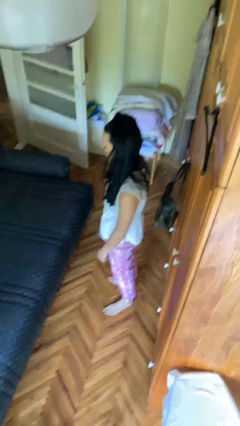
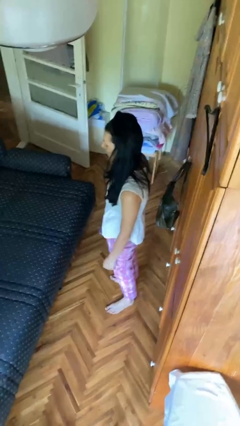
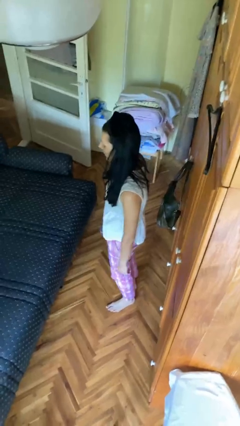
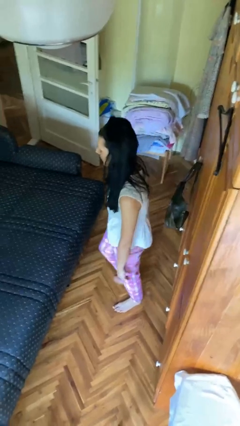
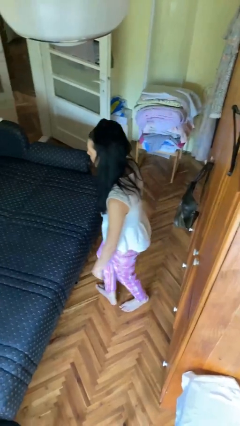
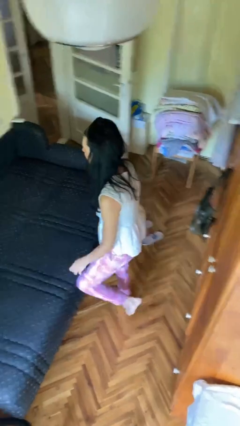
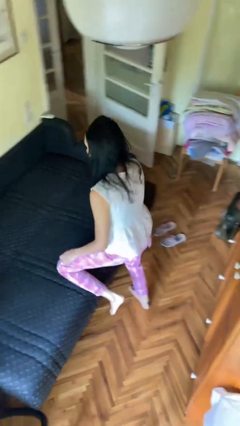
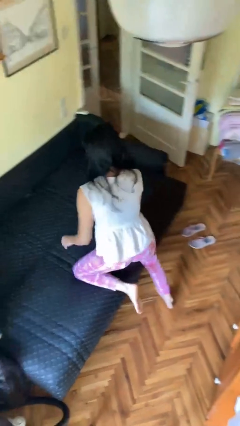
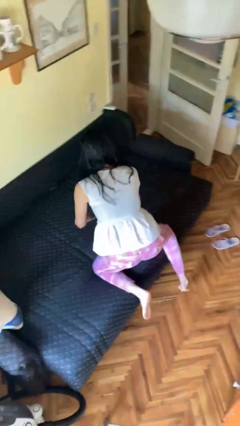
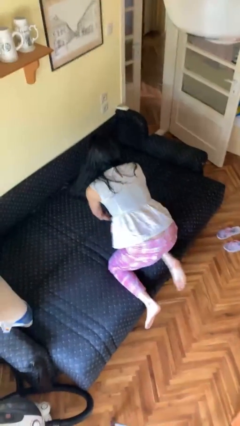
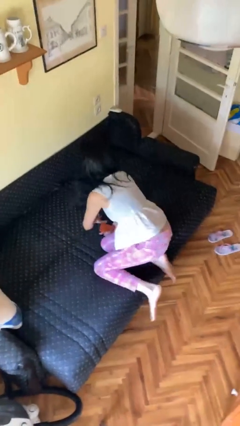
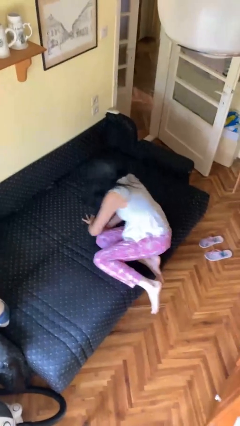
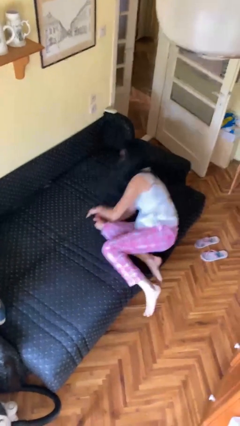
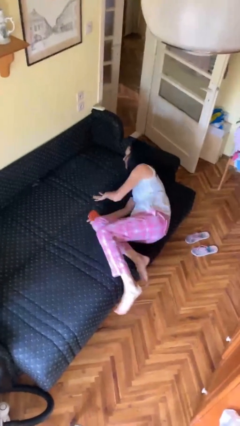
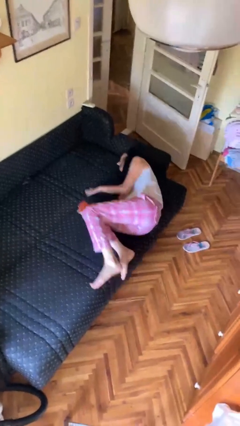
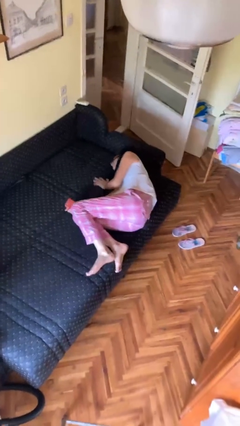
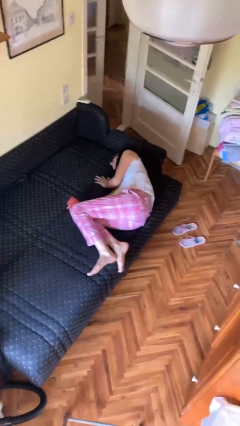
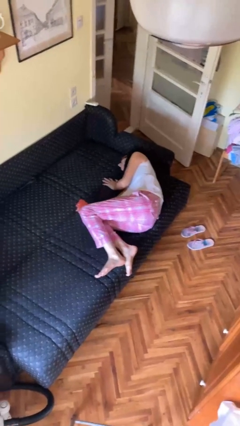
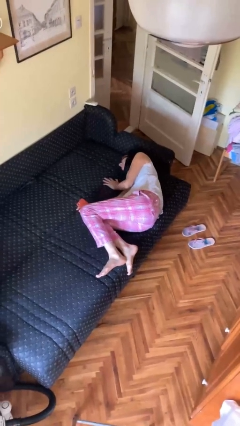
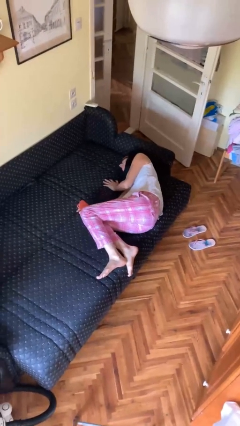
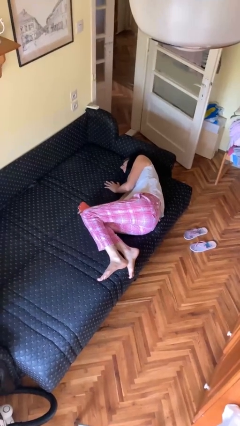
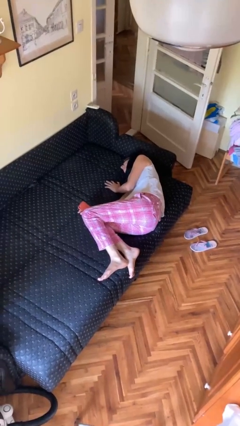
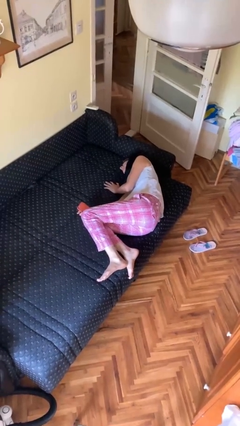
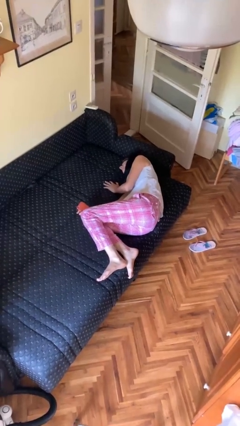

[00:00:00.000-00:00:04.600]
person lies down on bed

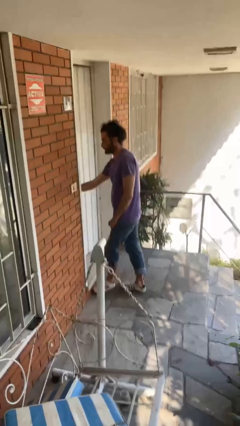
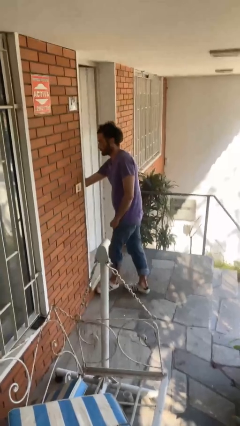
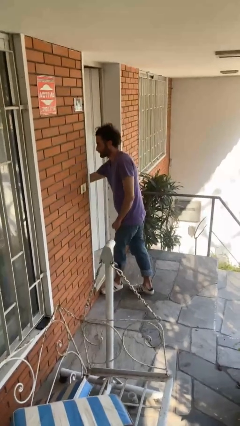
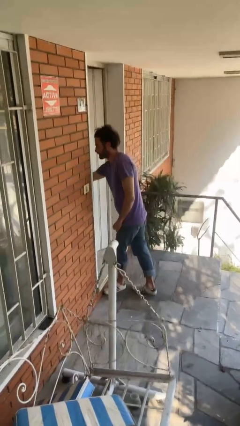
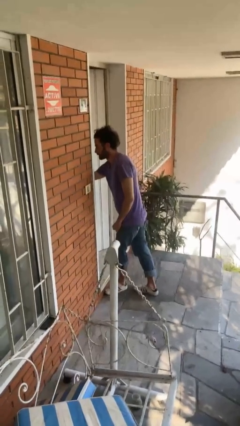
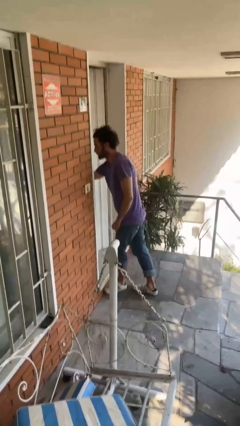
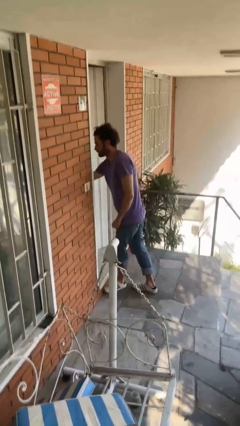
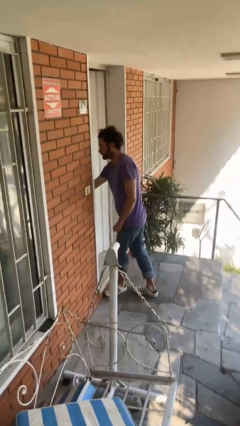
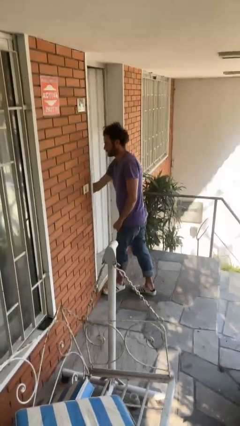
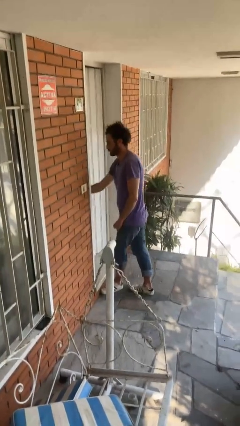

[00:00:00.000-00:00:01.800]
person opens facility door

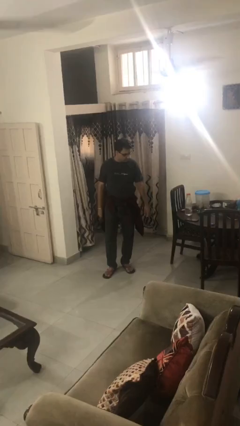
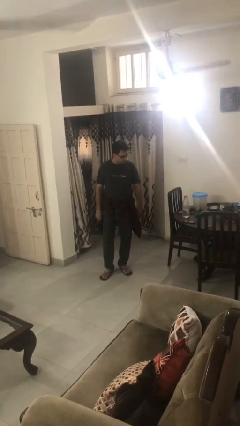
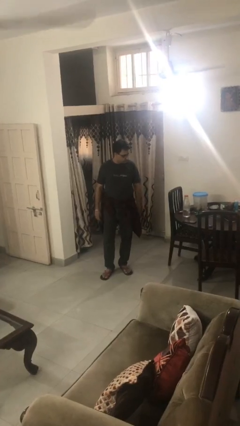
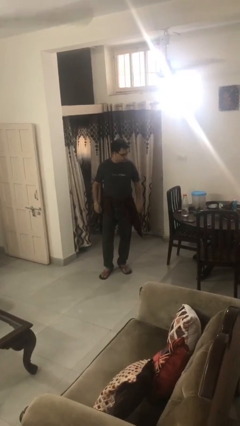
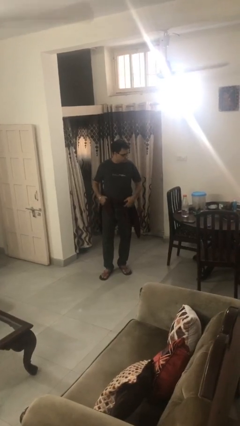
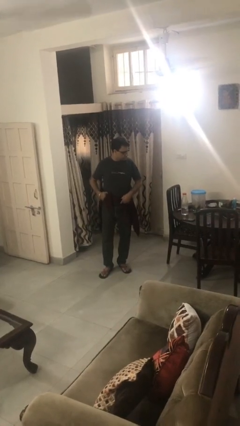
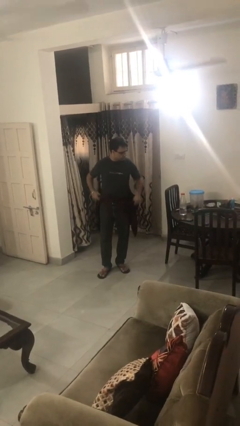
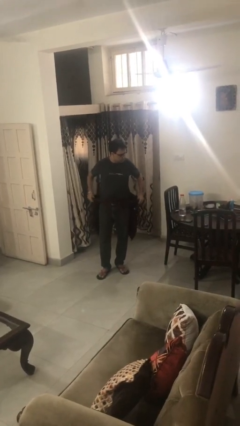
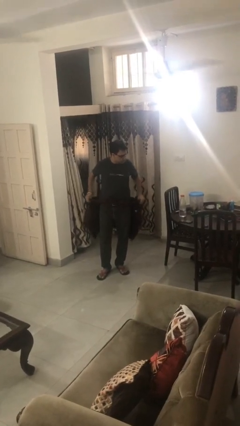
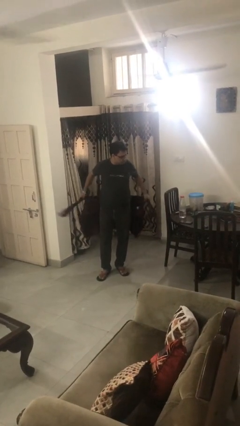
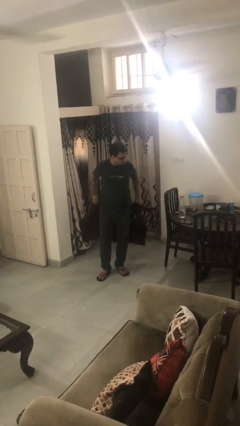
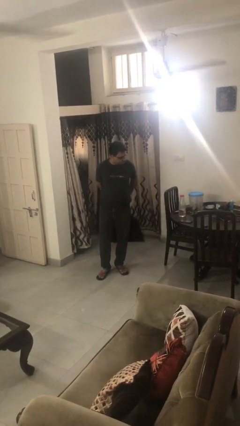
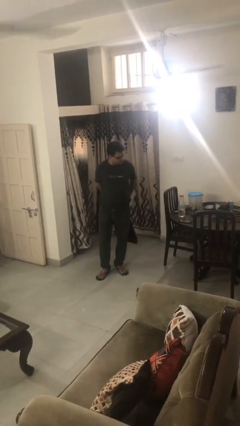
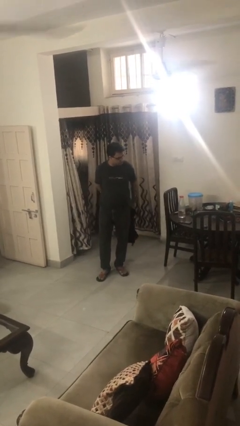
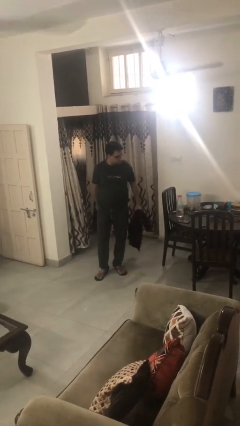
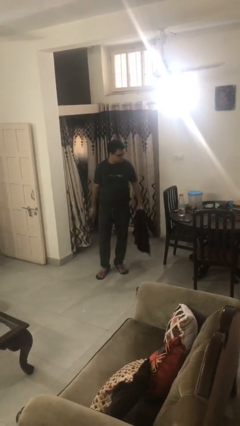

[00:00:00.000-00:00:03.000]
person unties jacket around waist

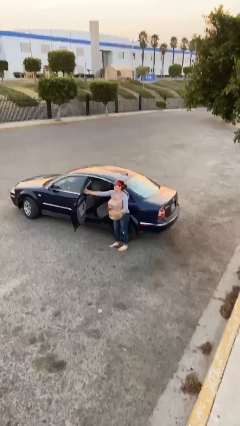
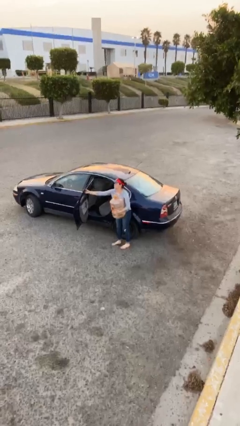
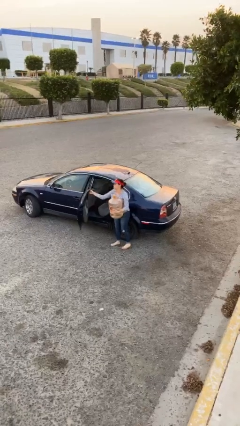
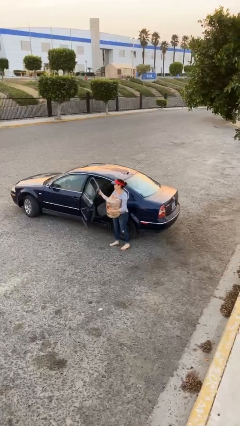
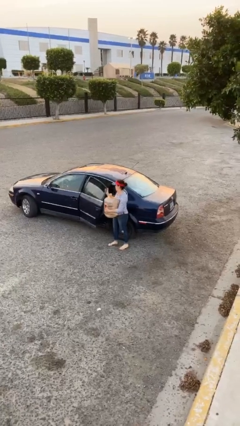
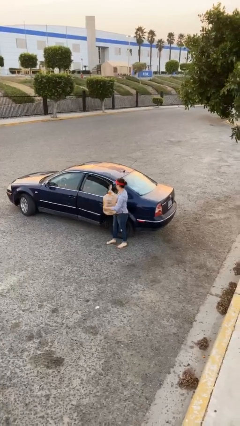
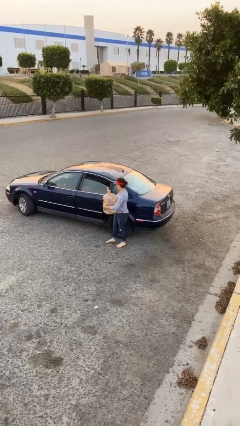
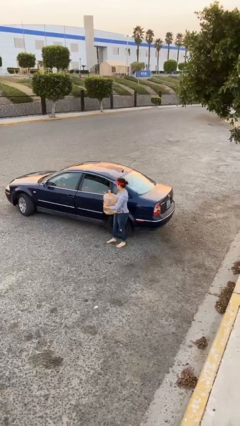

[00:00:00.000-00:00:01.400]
person closes car door

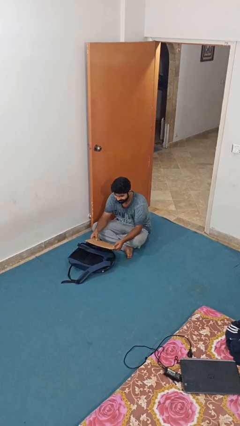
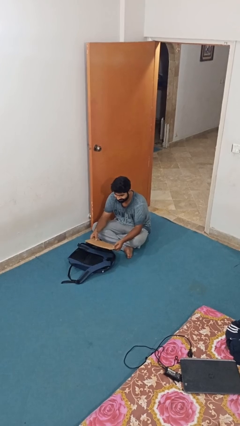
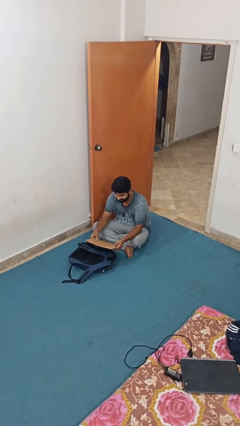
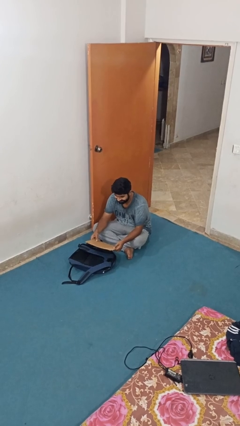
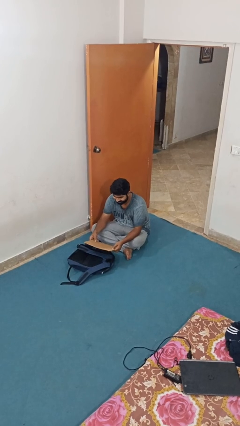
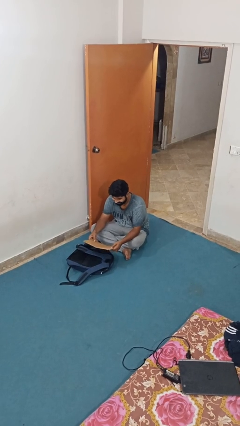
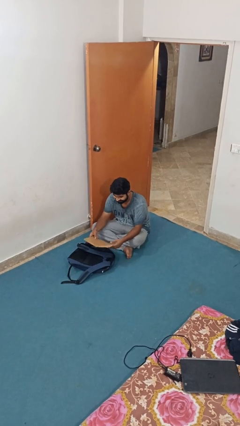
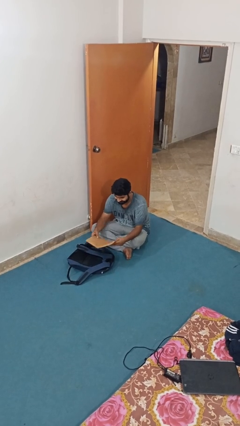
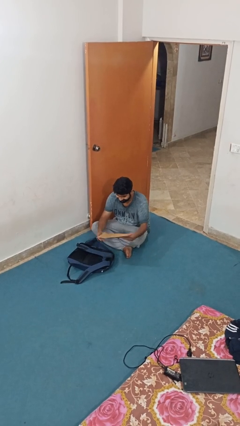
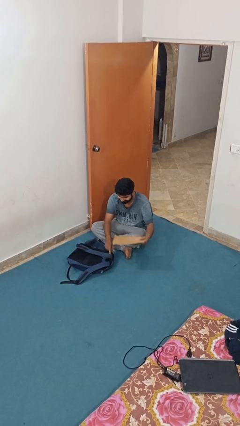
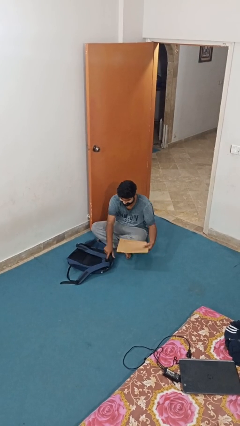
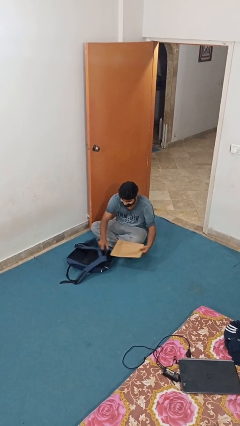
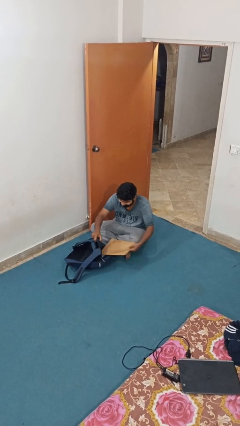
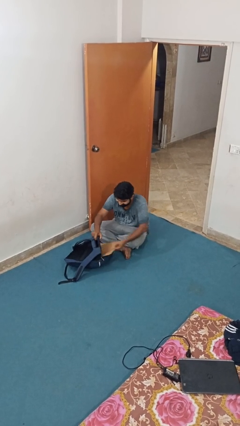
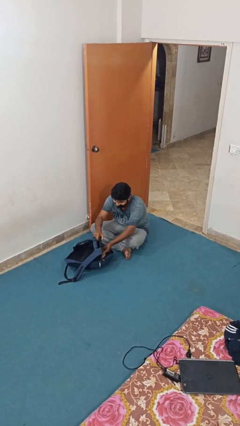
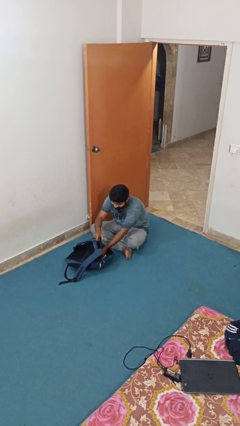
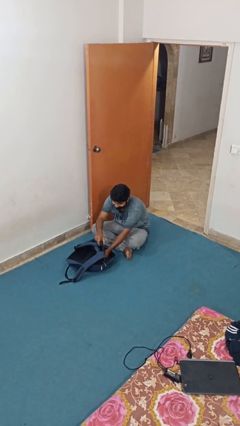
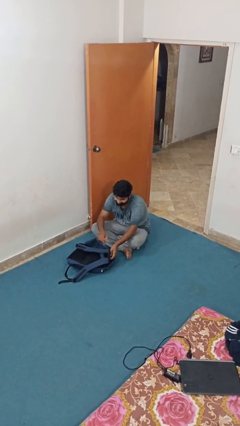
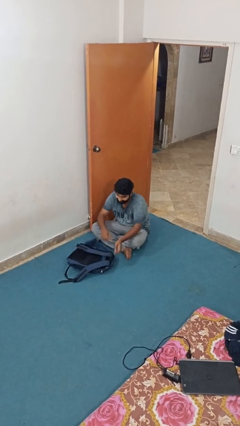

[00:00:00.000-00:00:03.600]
person puts object into backpack

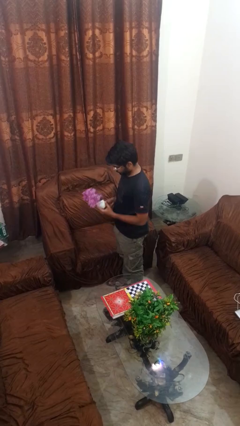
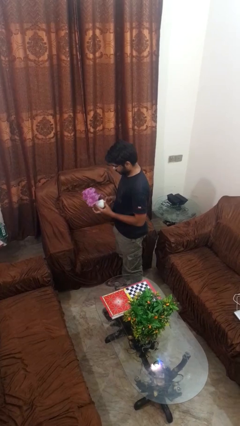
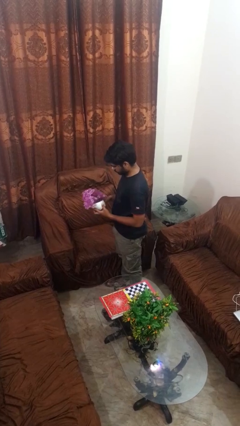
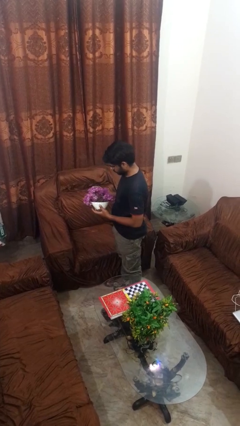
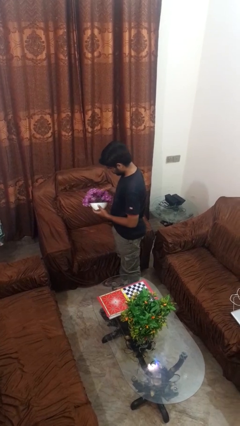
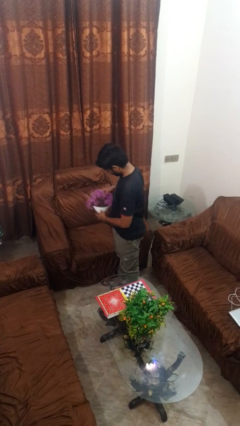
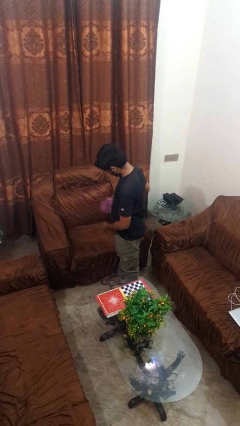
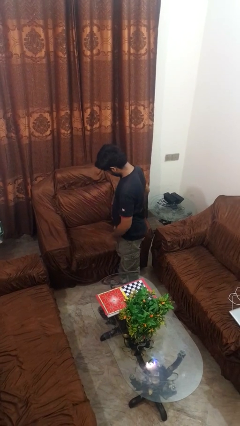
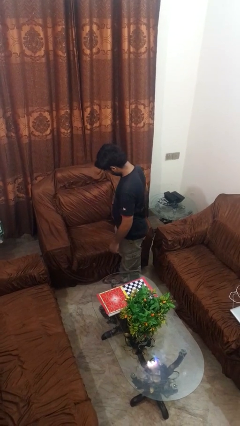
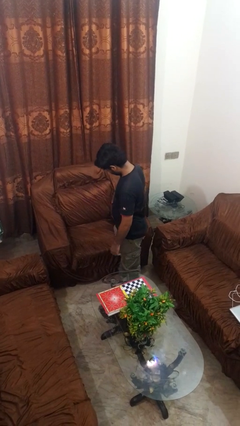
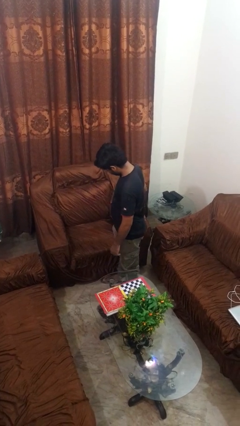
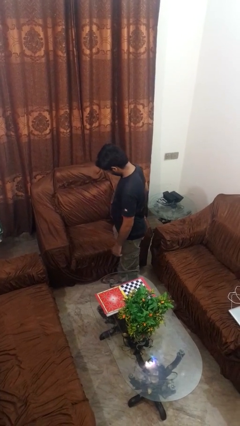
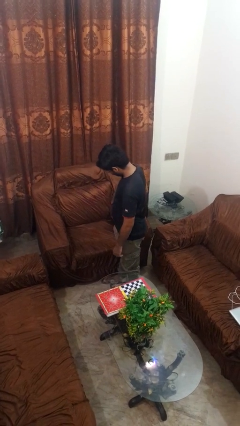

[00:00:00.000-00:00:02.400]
person puts down object on couch

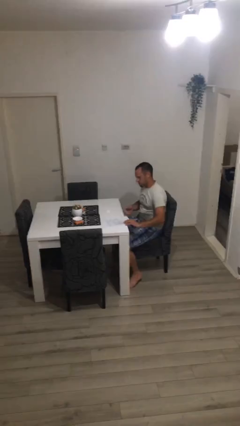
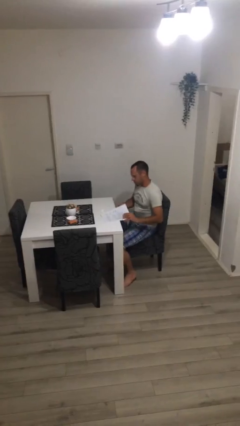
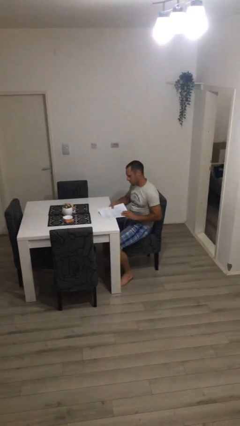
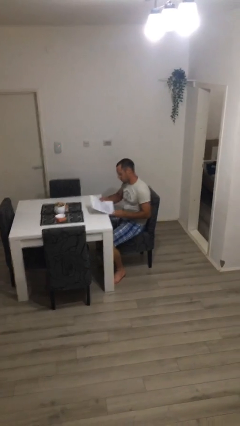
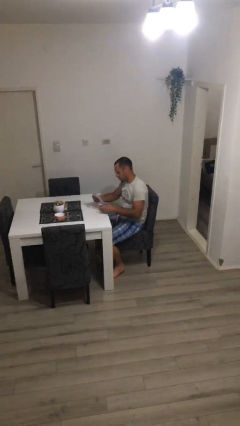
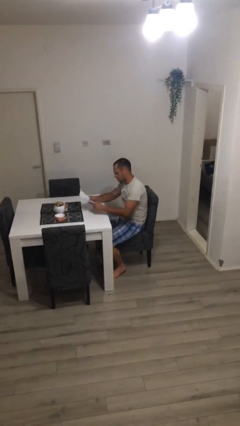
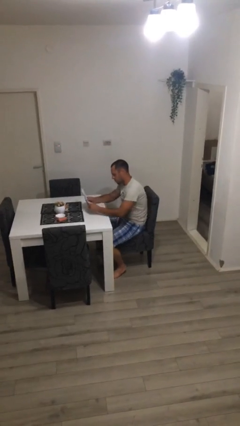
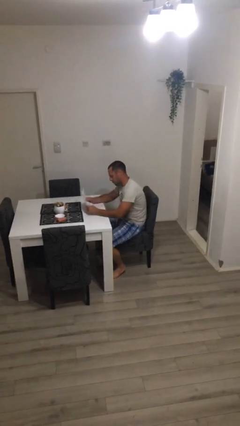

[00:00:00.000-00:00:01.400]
person sits down
